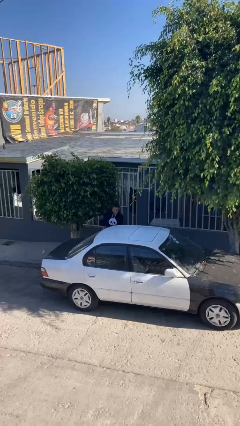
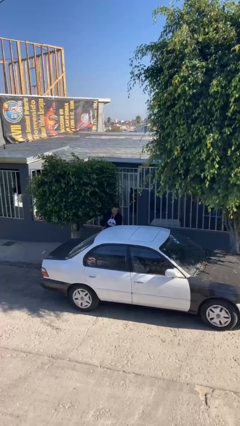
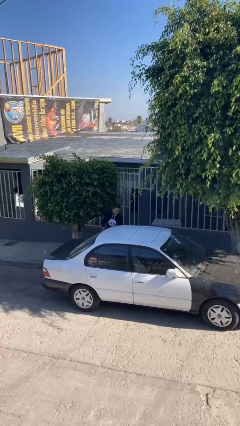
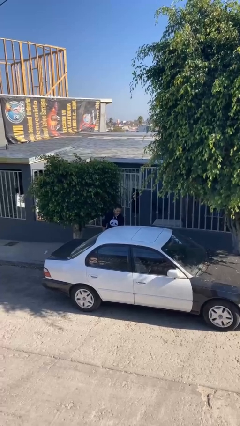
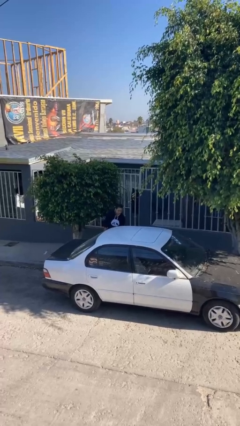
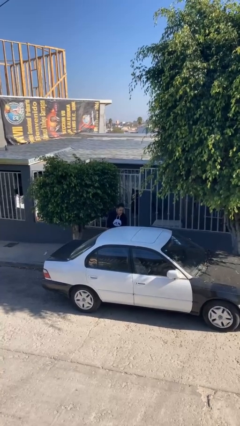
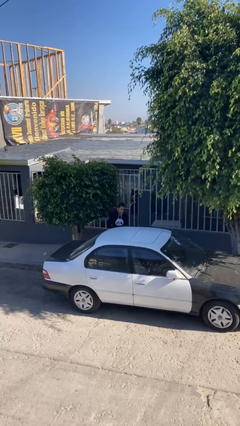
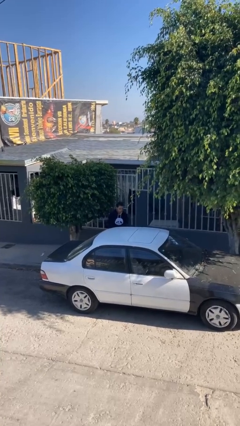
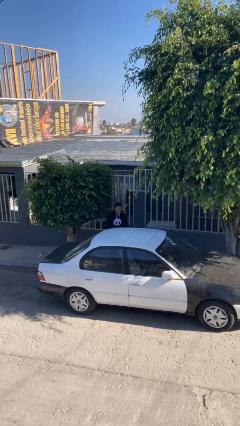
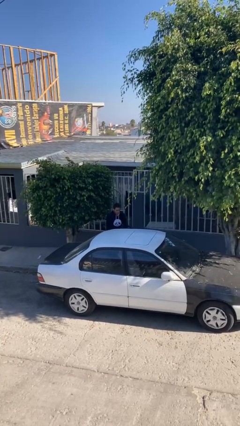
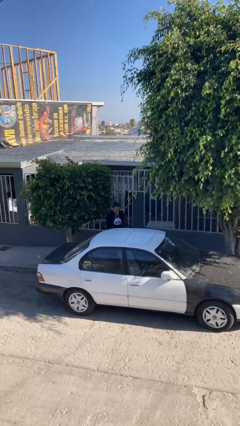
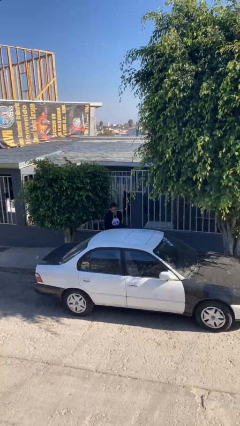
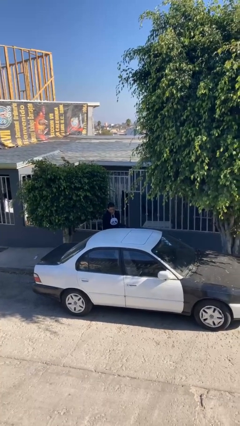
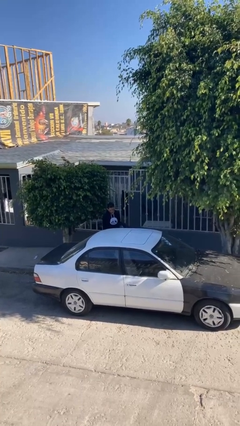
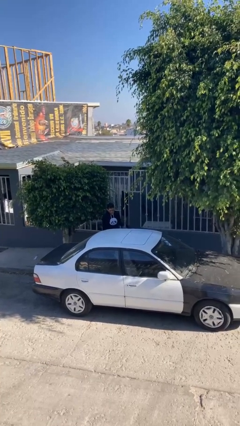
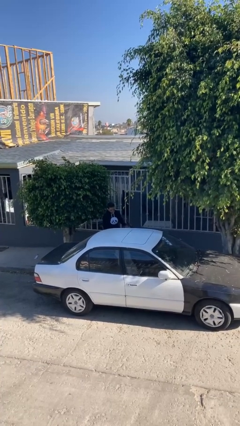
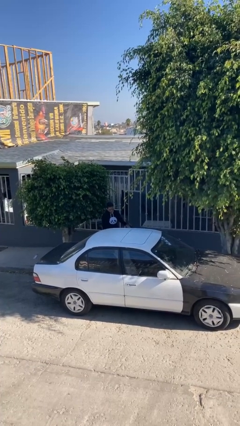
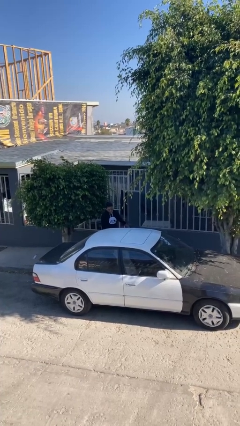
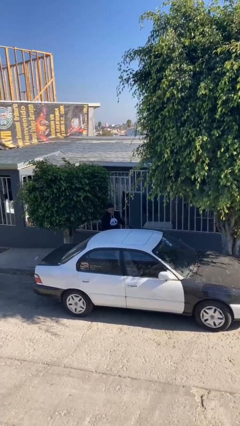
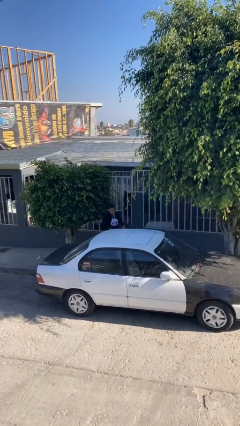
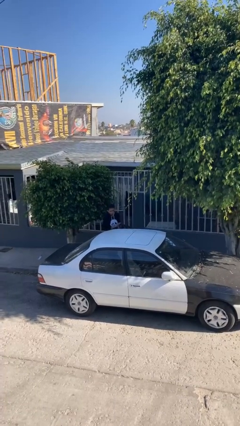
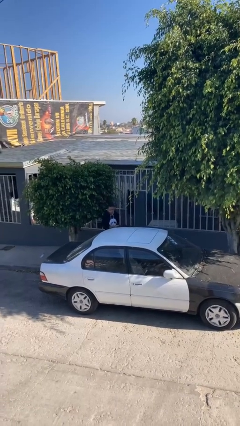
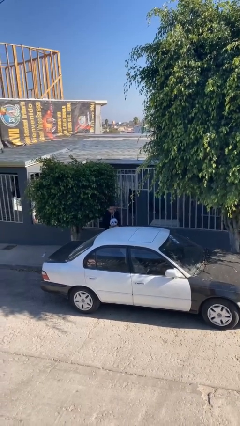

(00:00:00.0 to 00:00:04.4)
person opens car door

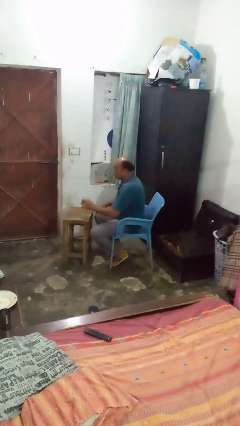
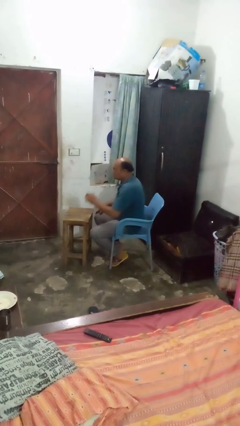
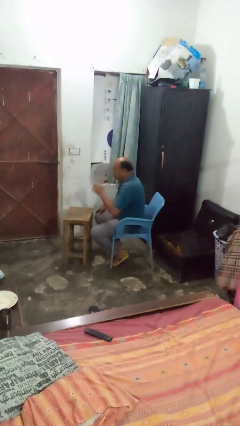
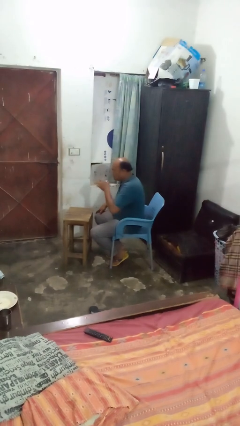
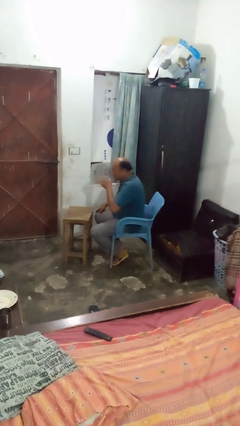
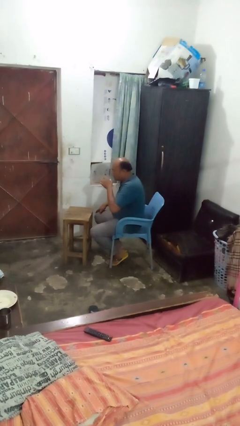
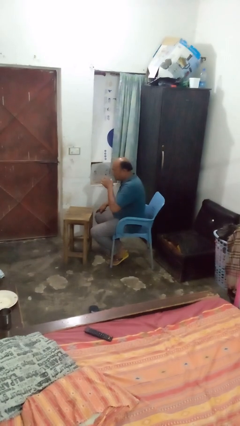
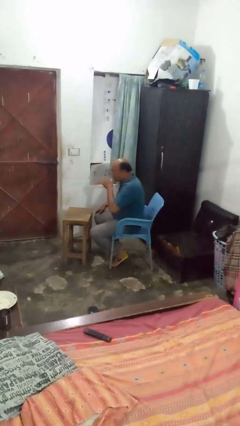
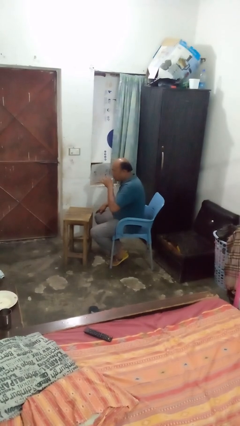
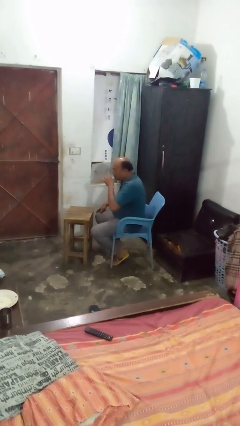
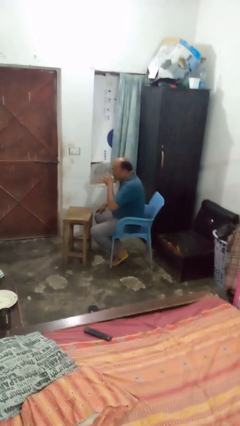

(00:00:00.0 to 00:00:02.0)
person drinks from shotglass

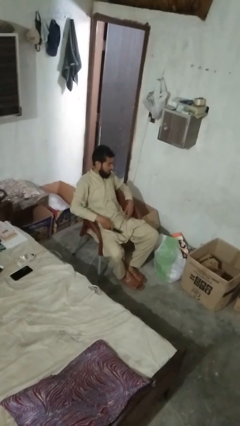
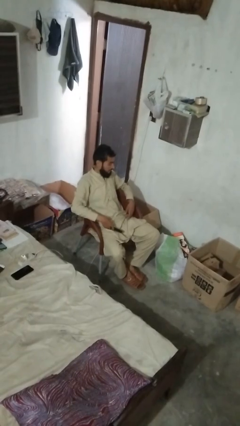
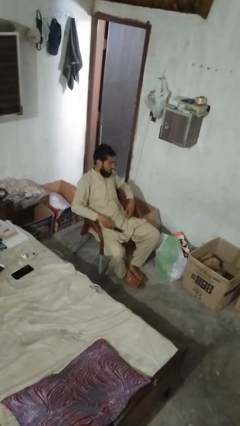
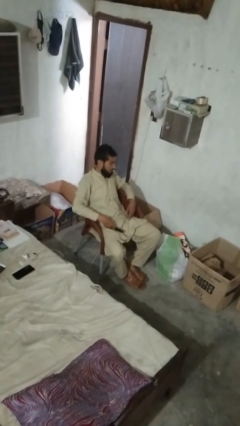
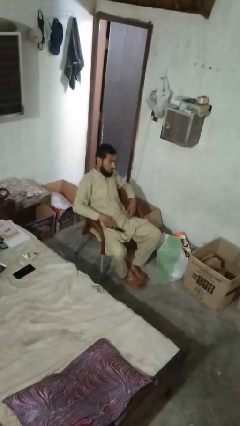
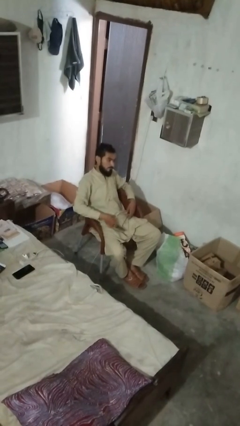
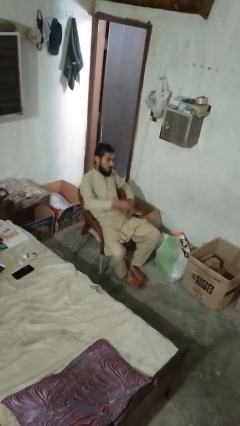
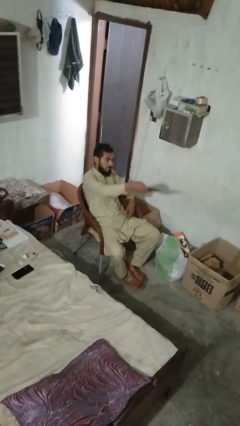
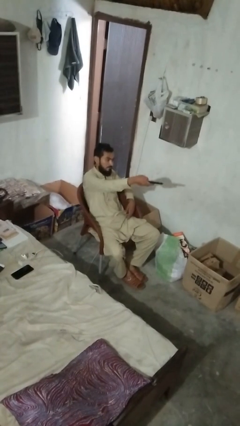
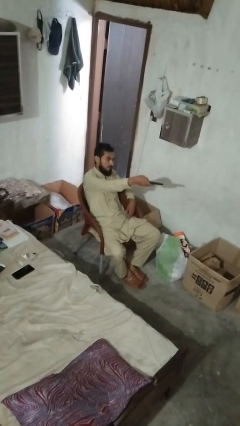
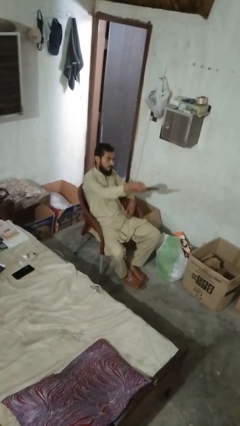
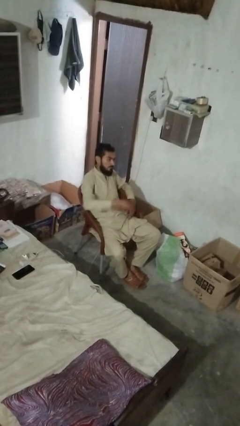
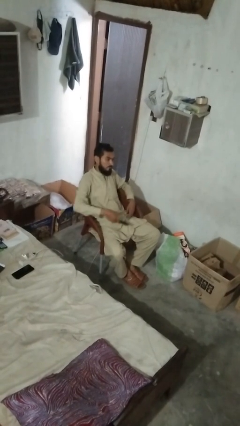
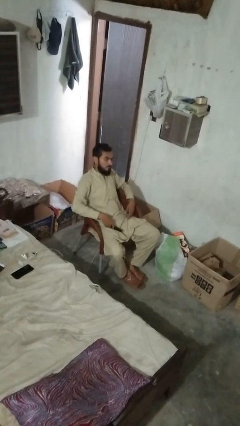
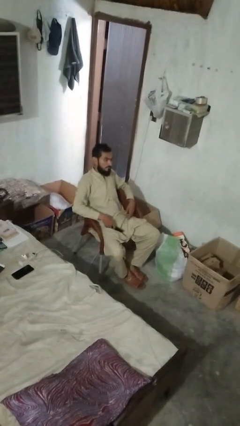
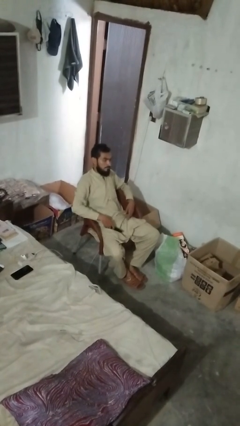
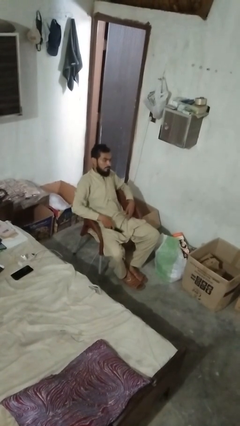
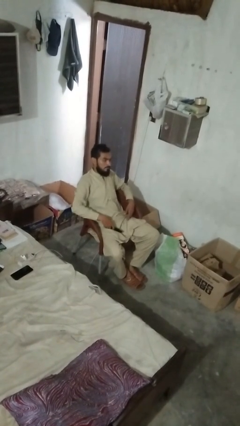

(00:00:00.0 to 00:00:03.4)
person uses television remote

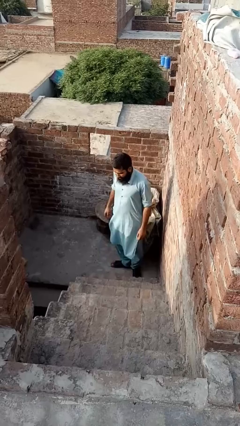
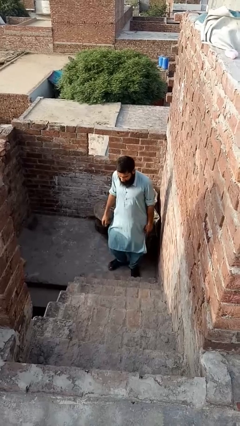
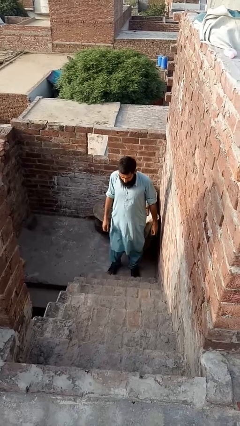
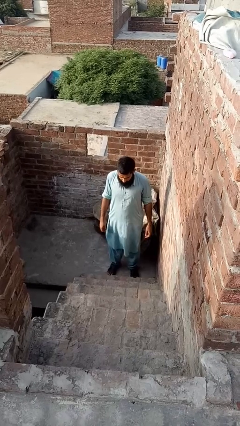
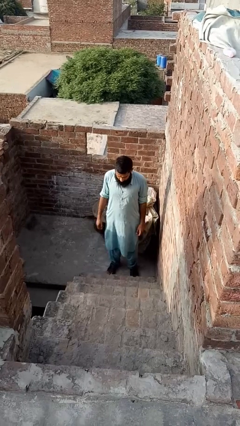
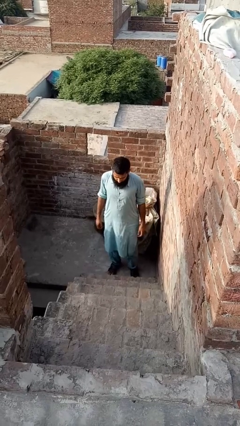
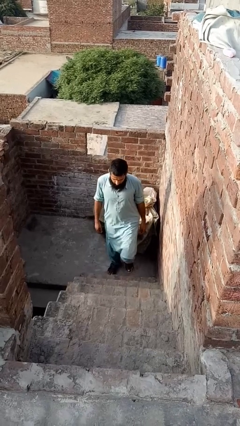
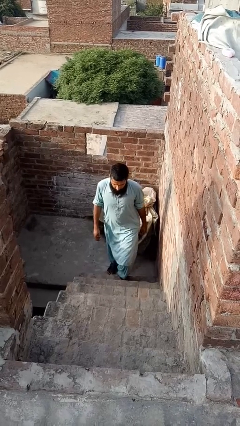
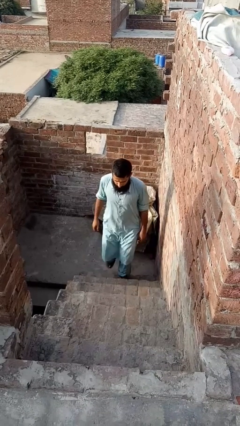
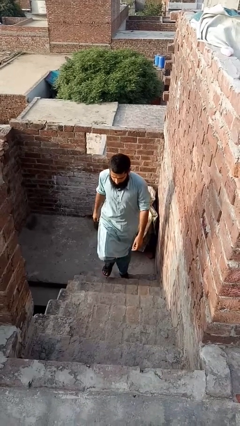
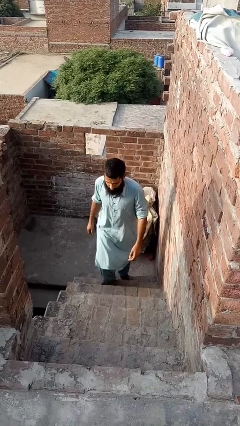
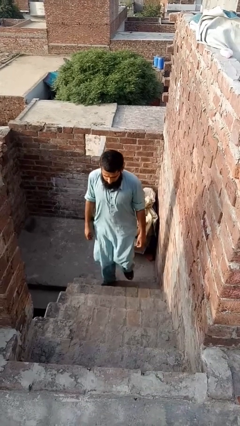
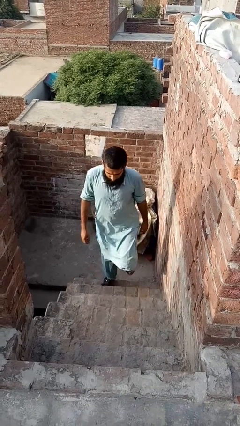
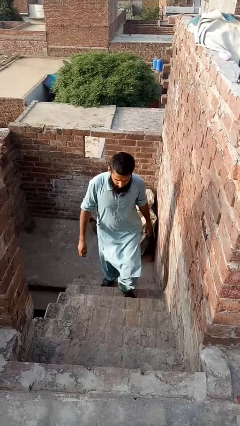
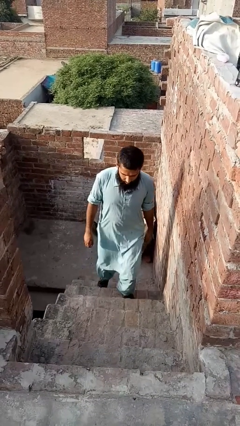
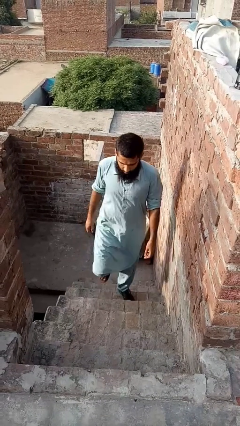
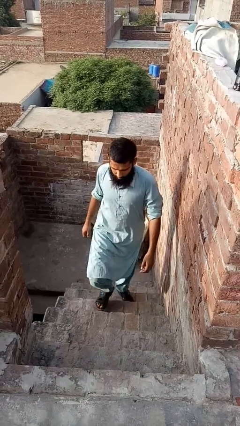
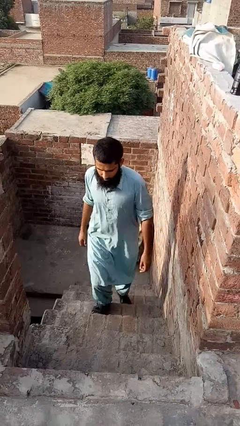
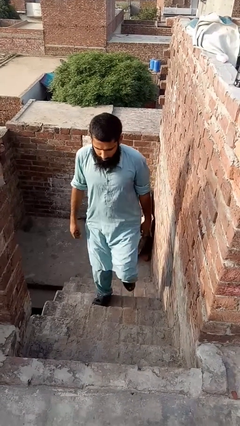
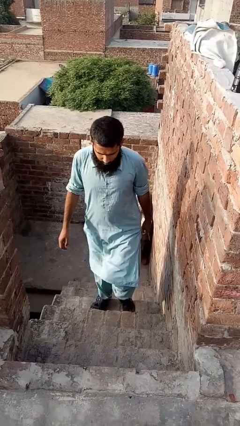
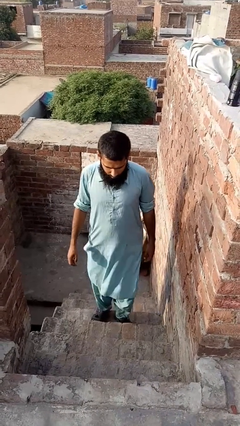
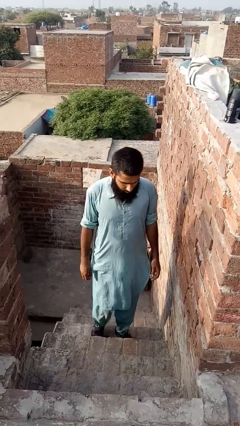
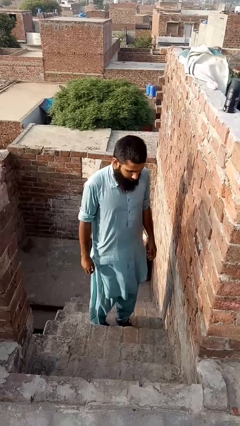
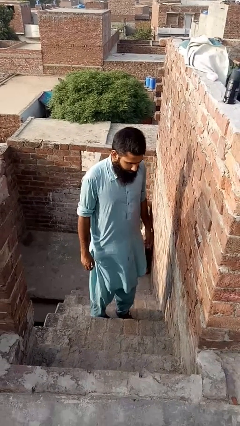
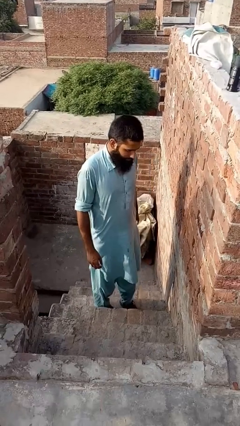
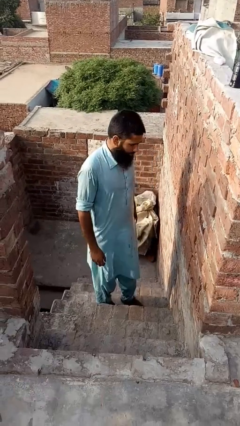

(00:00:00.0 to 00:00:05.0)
person climbs up stairs

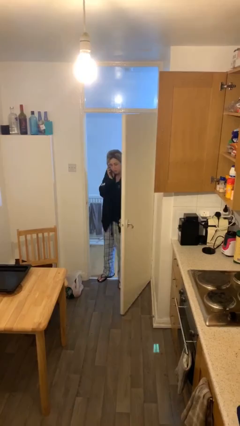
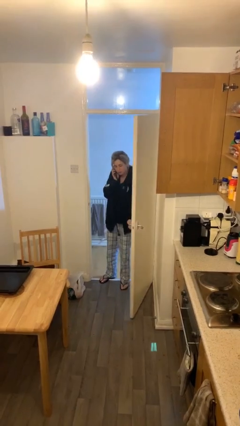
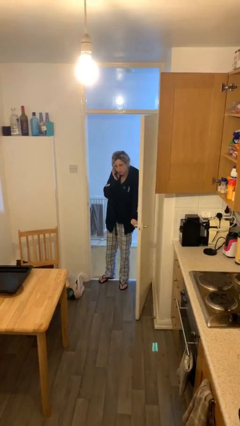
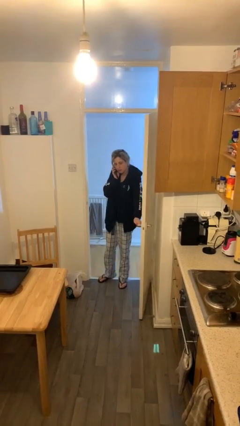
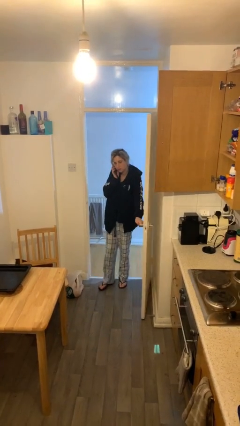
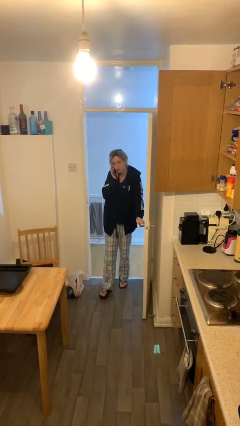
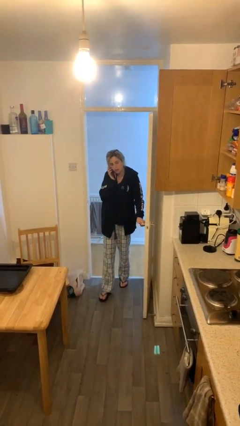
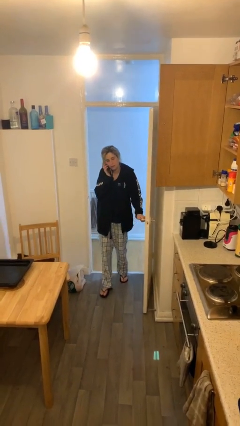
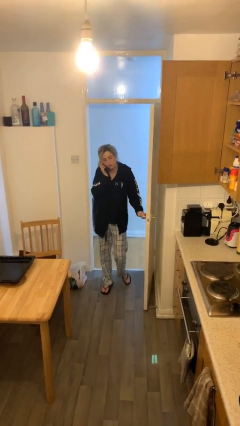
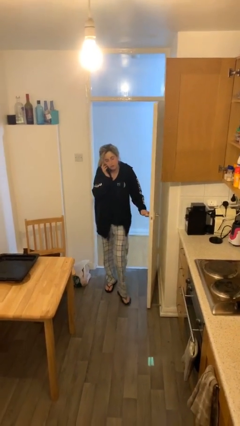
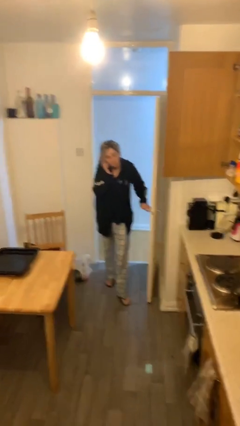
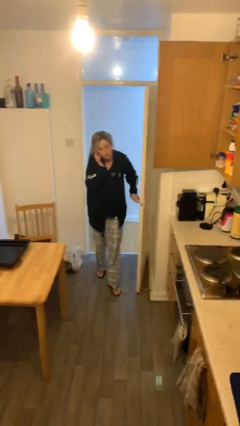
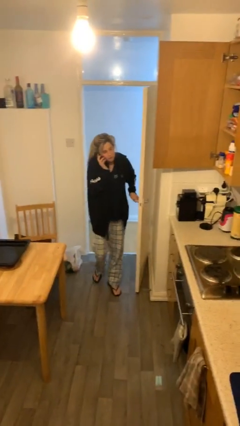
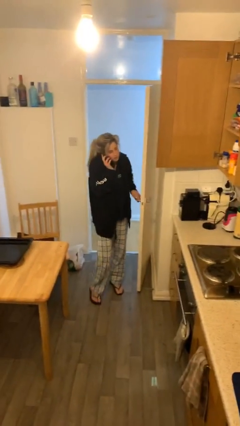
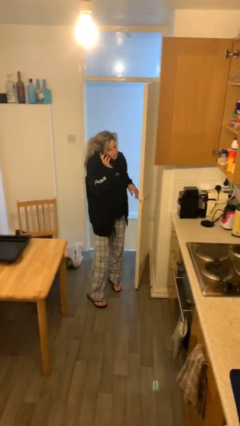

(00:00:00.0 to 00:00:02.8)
person enters scene through structure
